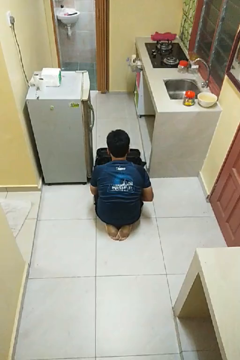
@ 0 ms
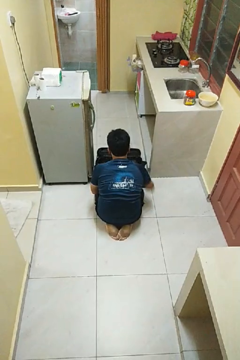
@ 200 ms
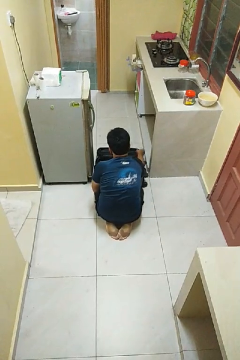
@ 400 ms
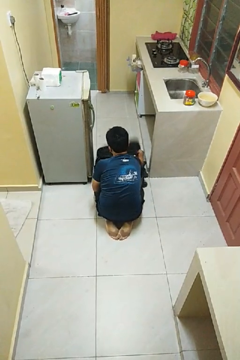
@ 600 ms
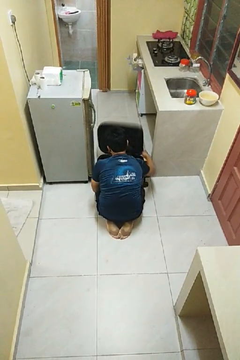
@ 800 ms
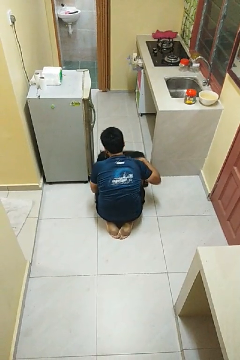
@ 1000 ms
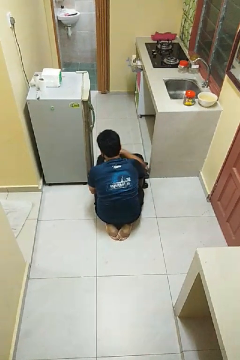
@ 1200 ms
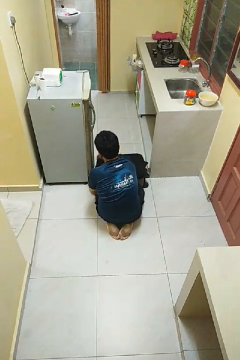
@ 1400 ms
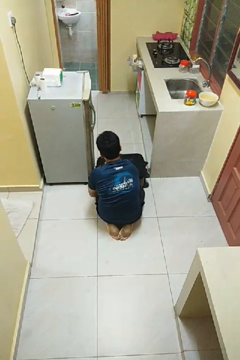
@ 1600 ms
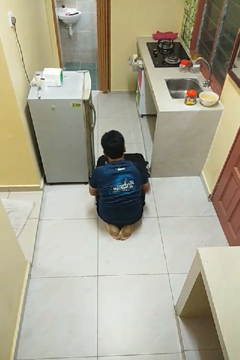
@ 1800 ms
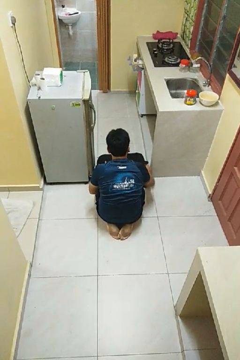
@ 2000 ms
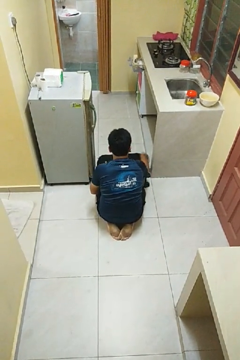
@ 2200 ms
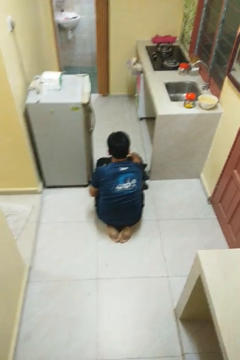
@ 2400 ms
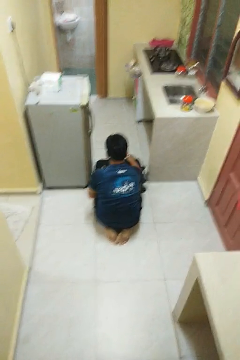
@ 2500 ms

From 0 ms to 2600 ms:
person closes suitcase

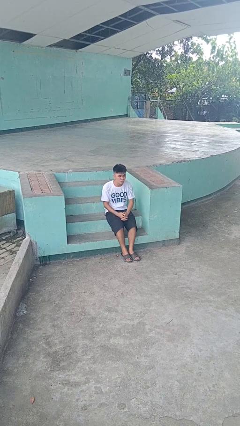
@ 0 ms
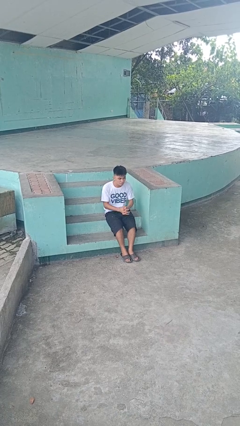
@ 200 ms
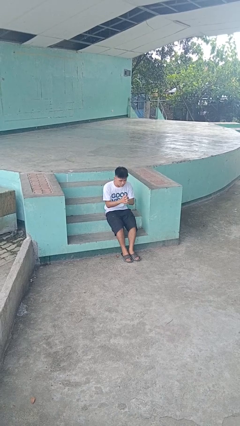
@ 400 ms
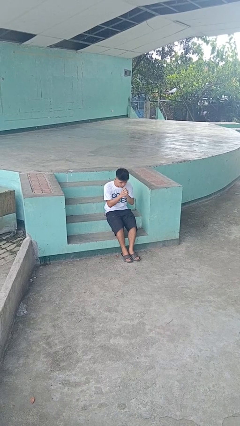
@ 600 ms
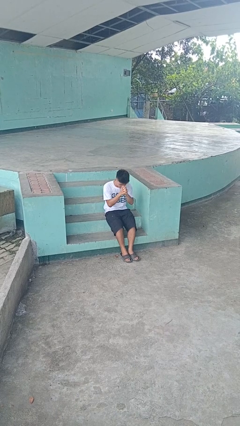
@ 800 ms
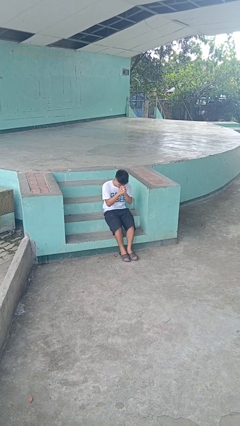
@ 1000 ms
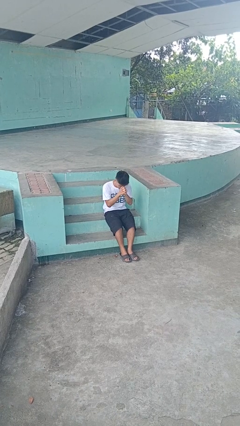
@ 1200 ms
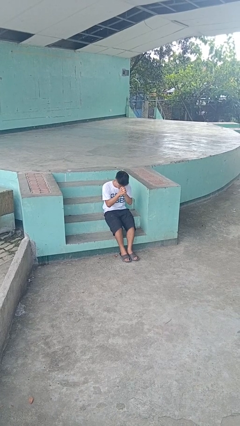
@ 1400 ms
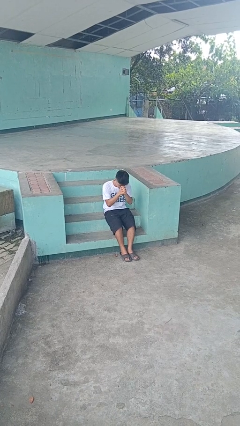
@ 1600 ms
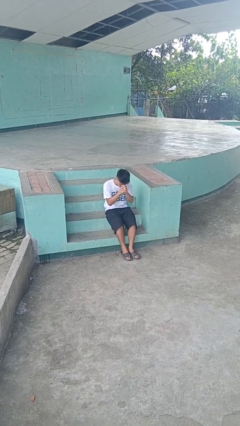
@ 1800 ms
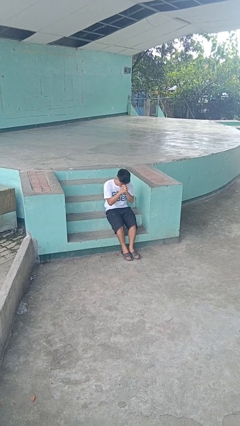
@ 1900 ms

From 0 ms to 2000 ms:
person prays

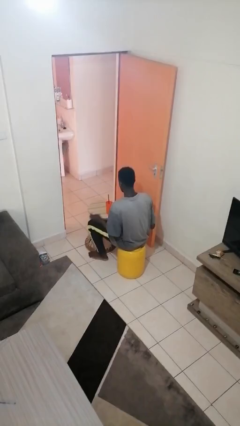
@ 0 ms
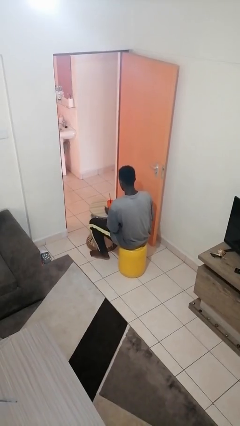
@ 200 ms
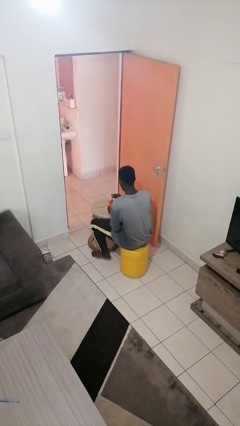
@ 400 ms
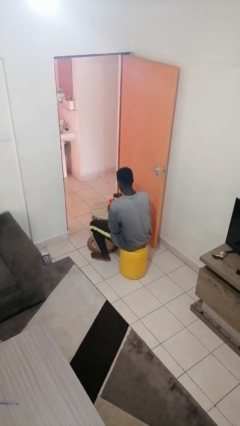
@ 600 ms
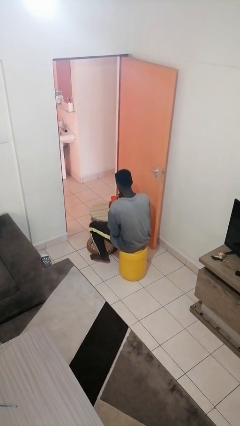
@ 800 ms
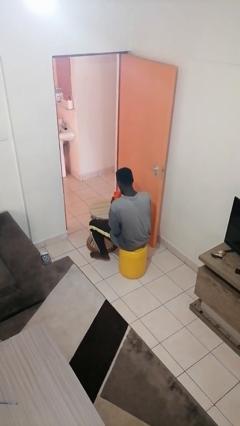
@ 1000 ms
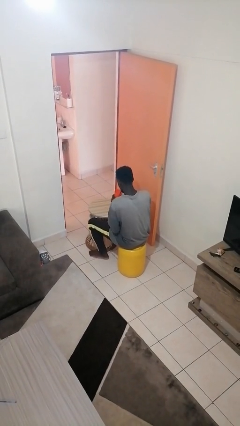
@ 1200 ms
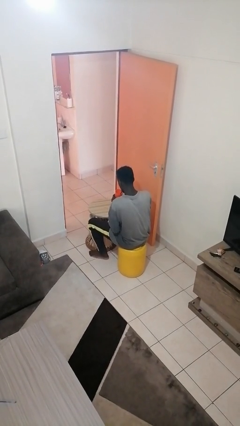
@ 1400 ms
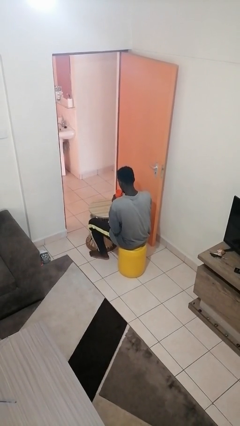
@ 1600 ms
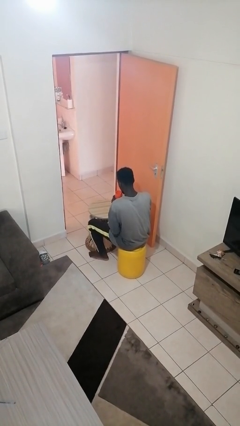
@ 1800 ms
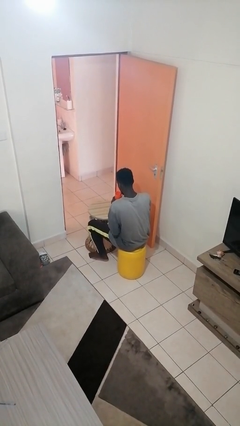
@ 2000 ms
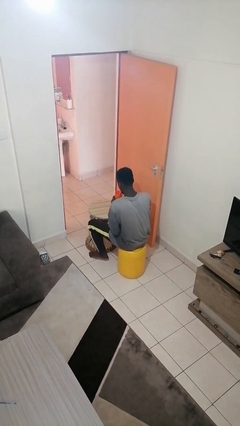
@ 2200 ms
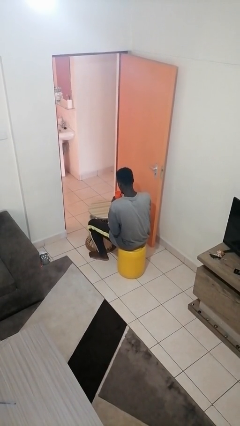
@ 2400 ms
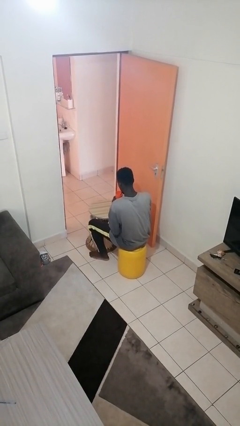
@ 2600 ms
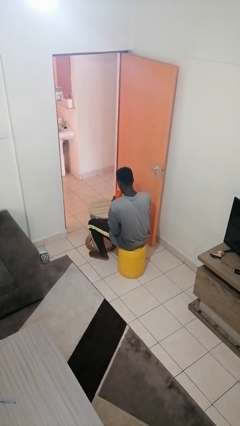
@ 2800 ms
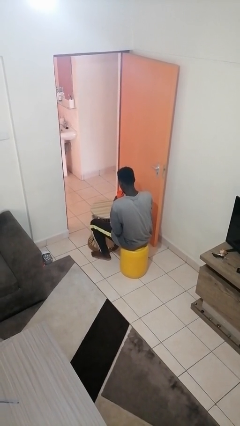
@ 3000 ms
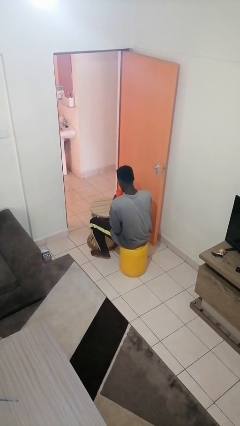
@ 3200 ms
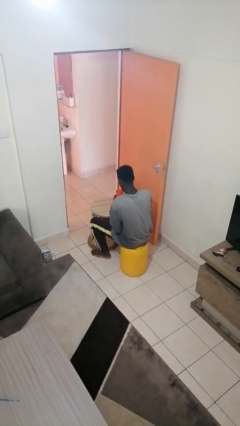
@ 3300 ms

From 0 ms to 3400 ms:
person drinks from straw

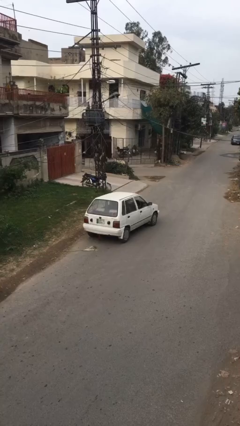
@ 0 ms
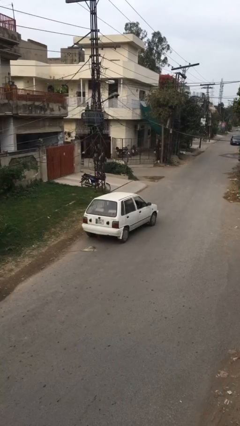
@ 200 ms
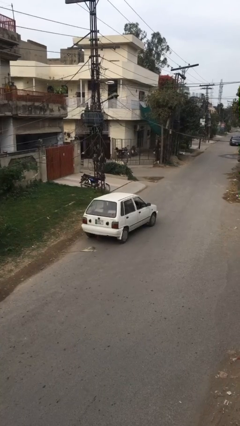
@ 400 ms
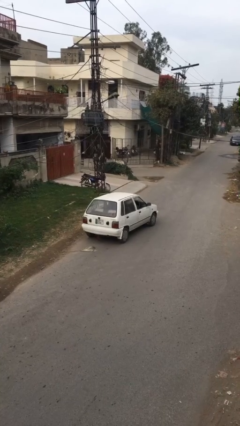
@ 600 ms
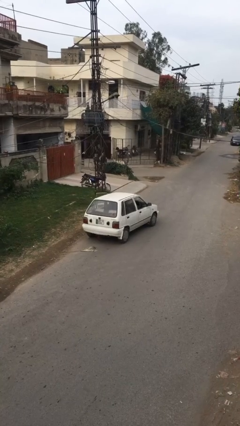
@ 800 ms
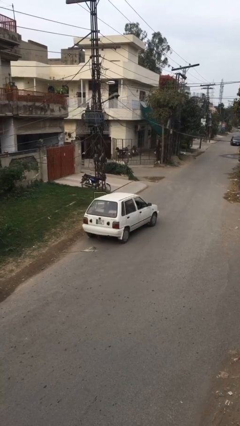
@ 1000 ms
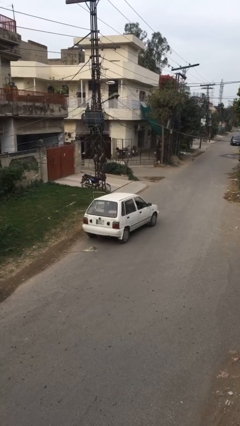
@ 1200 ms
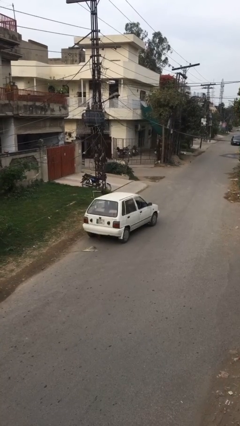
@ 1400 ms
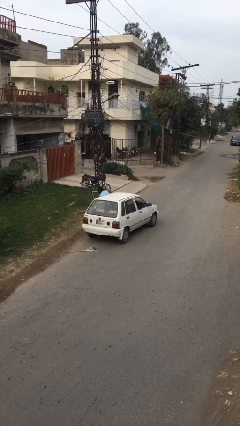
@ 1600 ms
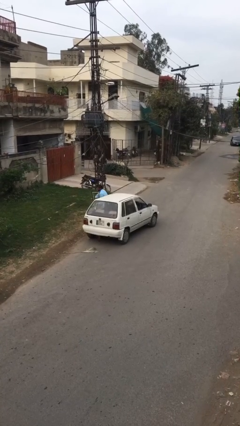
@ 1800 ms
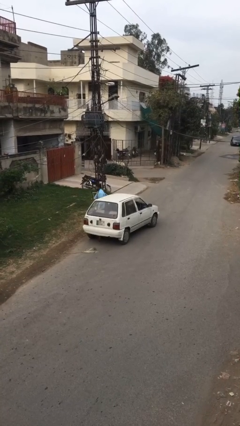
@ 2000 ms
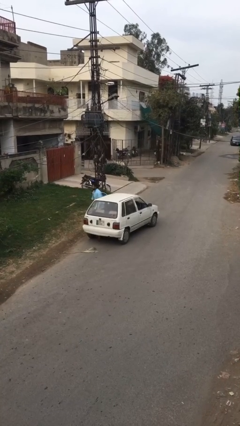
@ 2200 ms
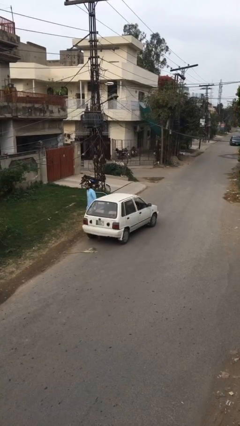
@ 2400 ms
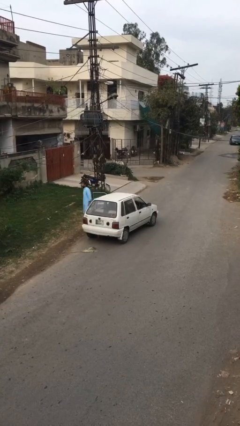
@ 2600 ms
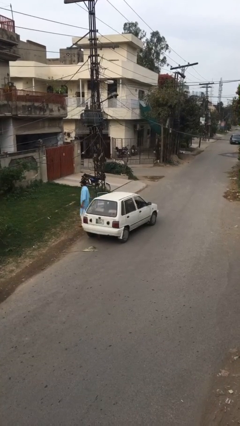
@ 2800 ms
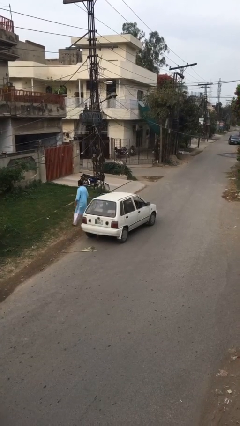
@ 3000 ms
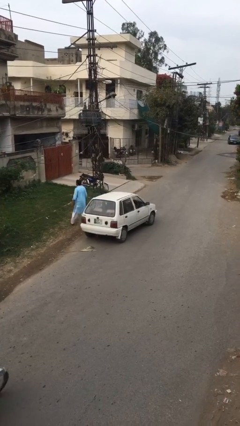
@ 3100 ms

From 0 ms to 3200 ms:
car drops off person

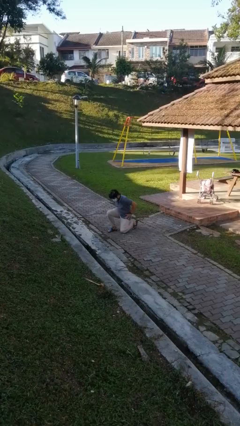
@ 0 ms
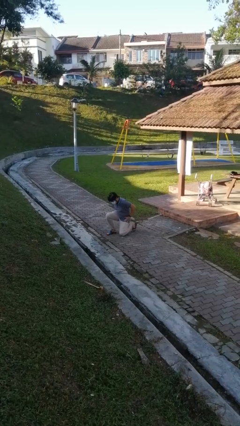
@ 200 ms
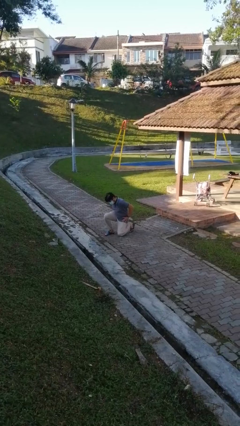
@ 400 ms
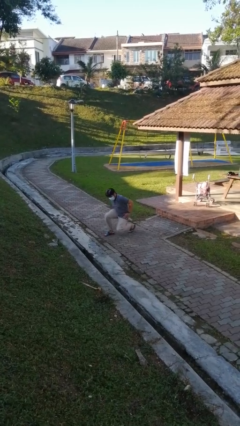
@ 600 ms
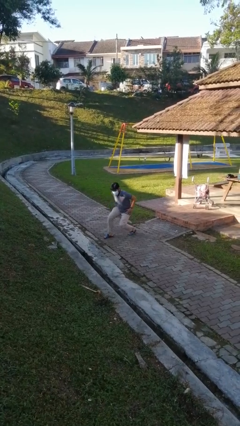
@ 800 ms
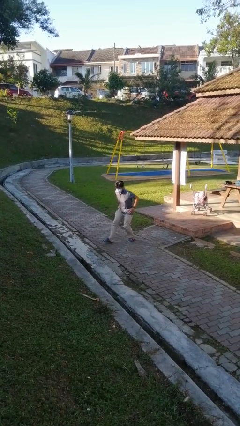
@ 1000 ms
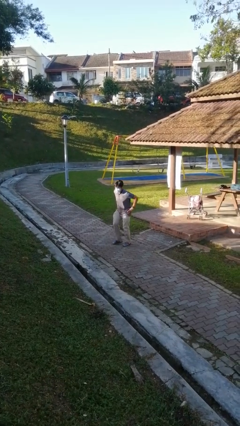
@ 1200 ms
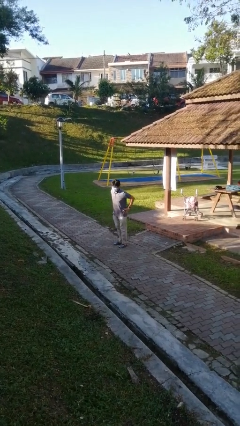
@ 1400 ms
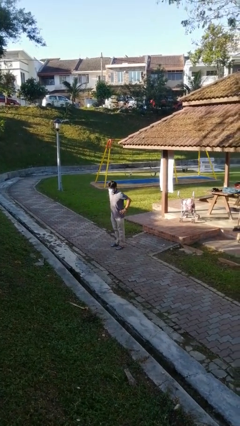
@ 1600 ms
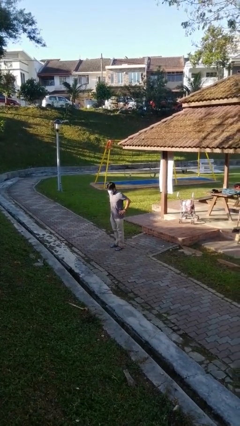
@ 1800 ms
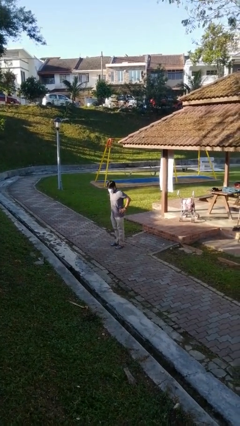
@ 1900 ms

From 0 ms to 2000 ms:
person stands up from floor

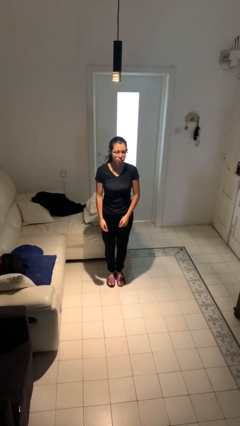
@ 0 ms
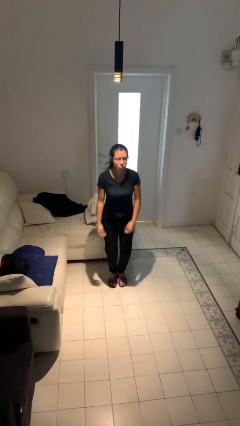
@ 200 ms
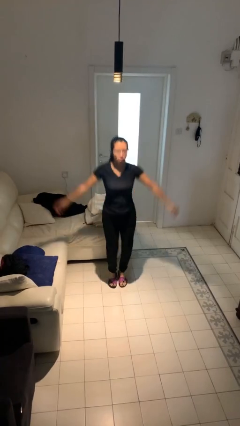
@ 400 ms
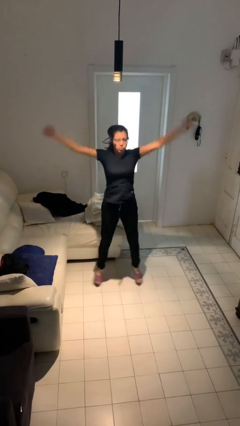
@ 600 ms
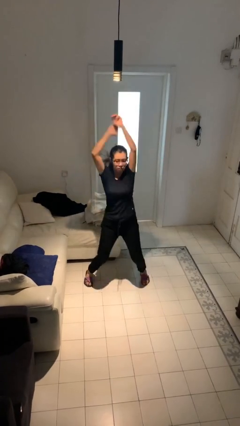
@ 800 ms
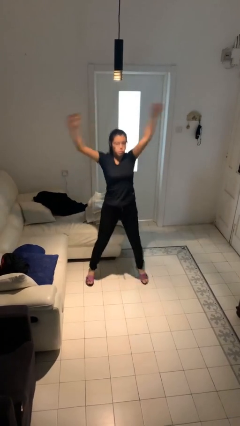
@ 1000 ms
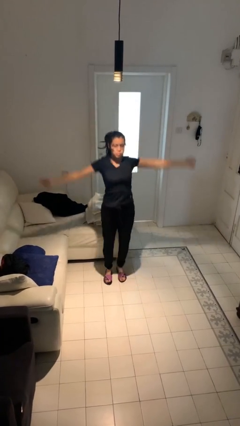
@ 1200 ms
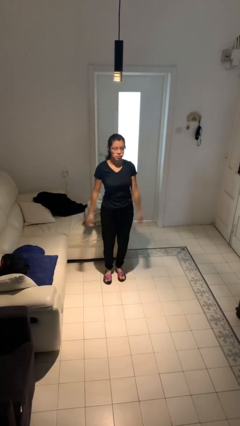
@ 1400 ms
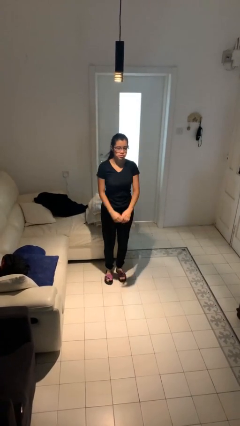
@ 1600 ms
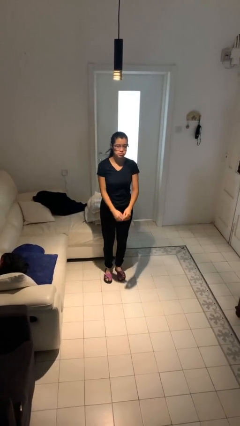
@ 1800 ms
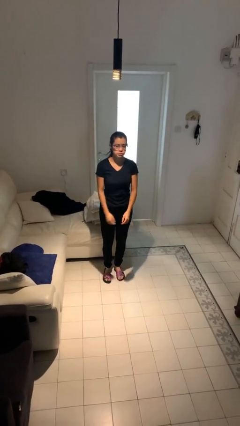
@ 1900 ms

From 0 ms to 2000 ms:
person jumps

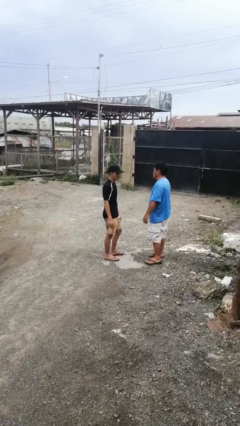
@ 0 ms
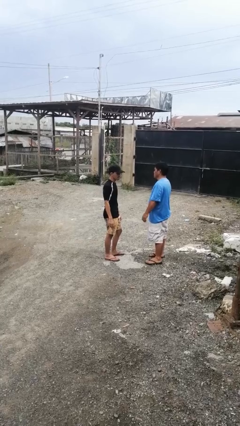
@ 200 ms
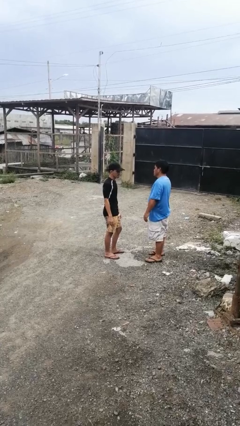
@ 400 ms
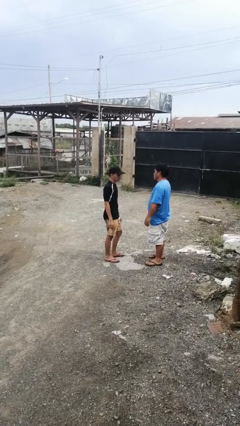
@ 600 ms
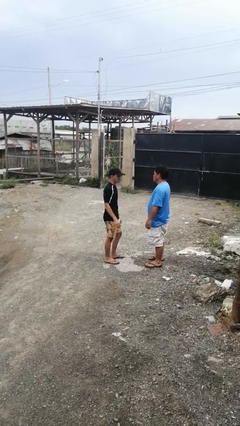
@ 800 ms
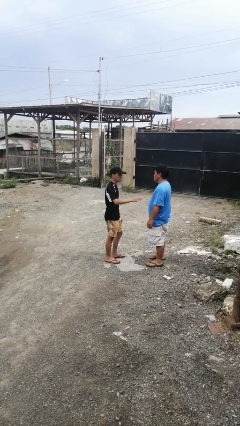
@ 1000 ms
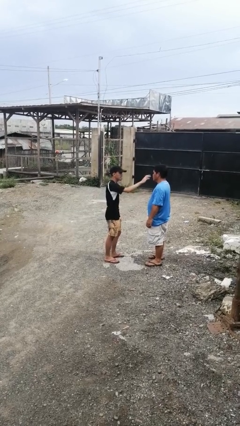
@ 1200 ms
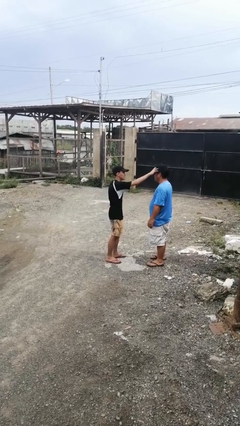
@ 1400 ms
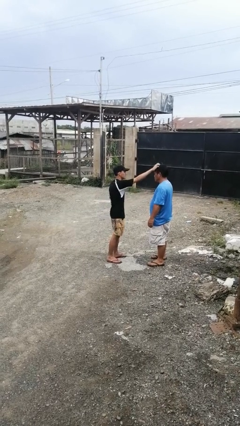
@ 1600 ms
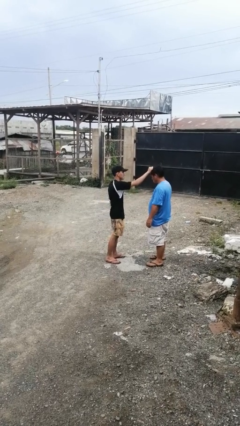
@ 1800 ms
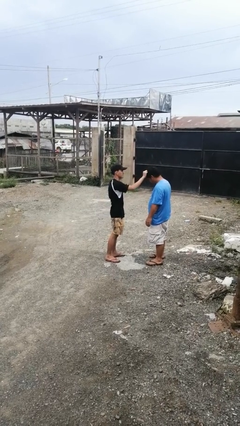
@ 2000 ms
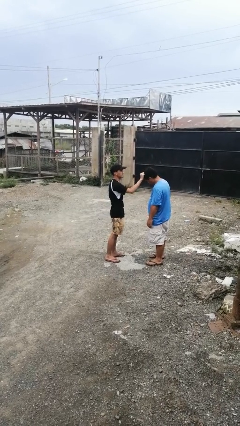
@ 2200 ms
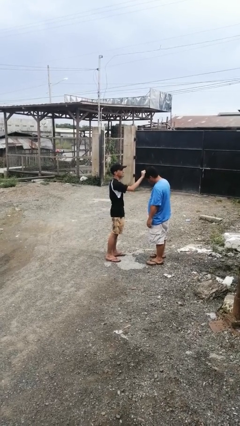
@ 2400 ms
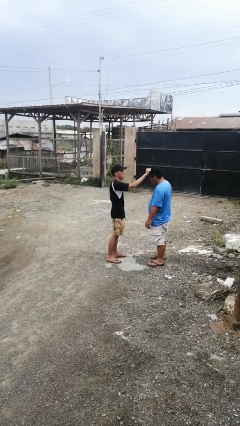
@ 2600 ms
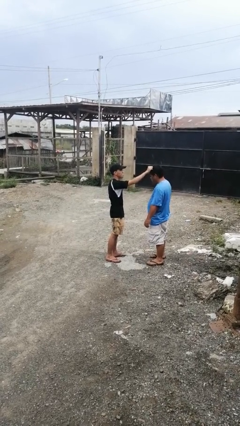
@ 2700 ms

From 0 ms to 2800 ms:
person grabs person by hair
